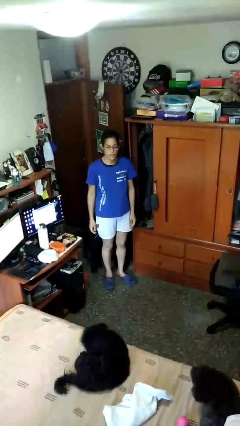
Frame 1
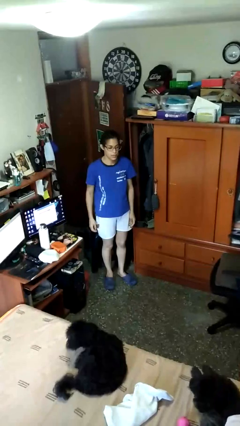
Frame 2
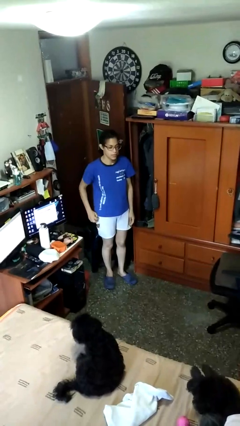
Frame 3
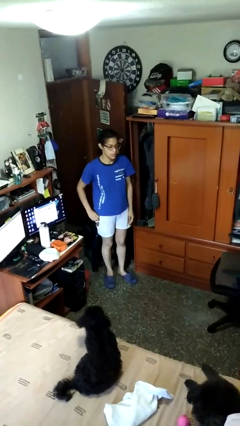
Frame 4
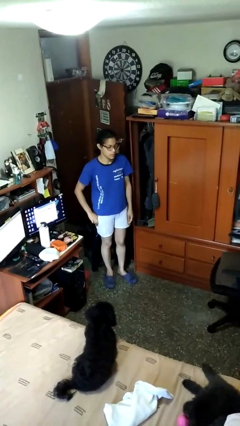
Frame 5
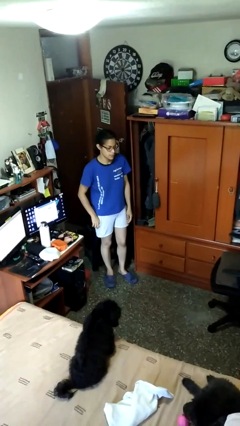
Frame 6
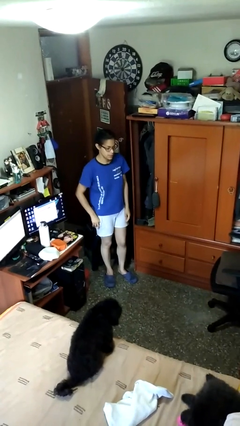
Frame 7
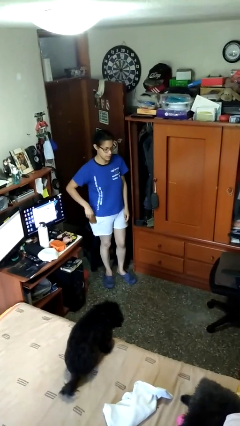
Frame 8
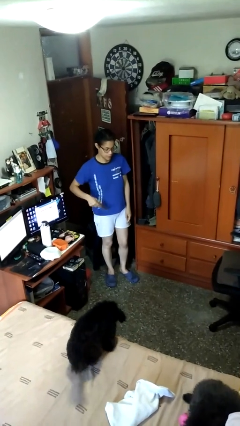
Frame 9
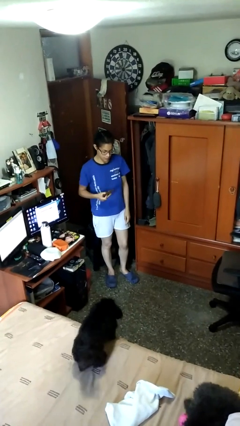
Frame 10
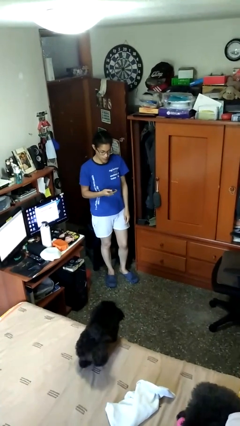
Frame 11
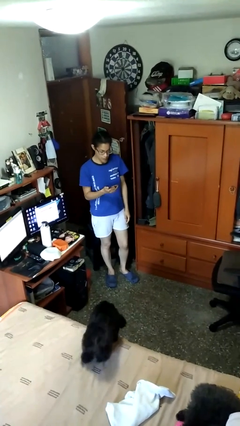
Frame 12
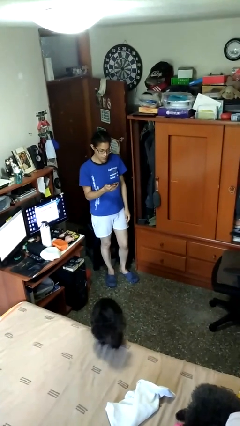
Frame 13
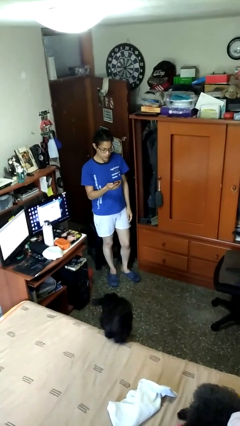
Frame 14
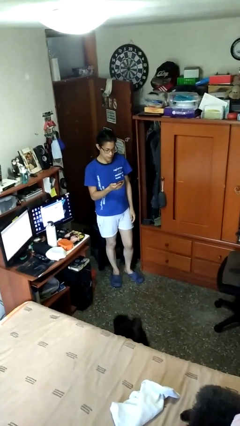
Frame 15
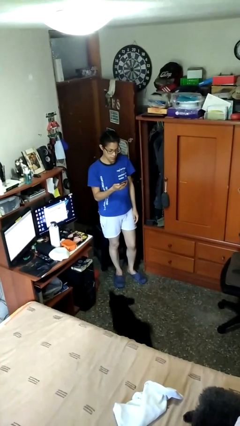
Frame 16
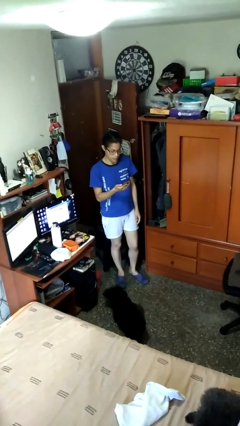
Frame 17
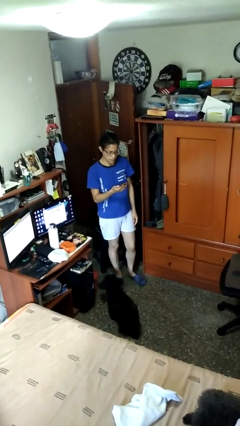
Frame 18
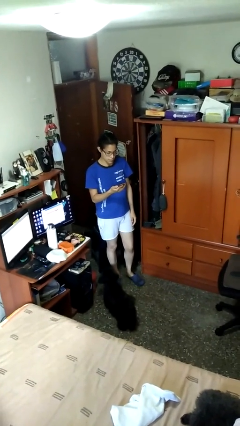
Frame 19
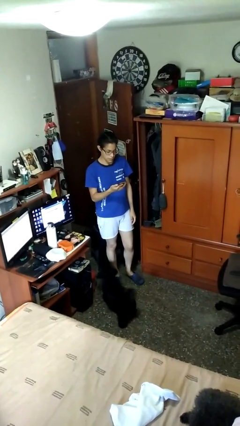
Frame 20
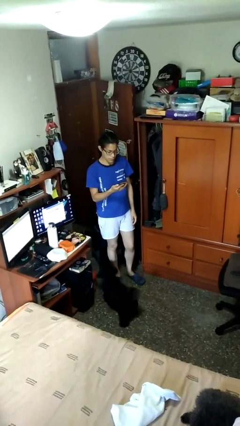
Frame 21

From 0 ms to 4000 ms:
person takes phone from pocket

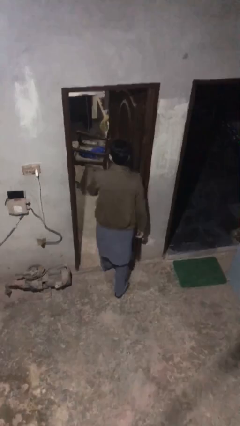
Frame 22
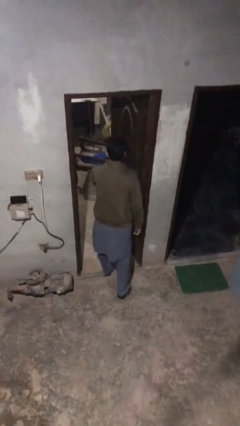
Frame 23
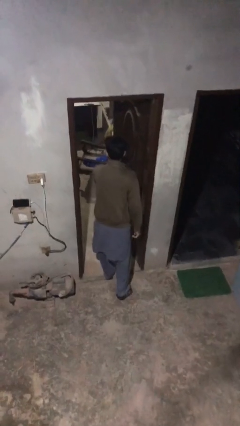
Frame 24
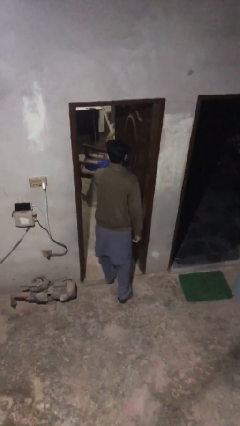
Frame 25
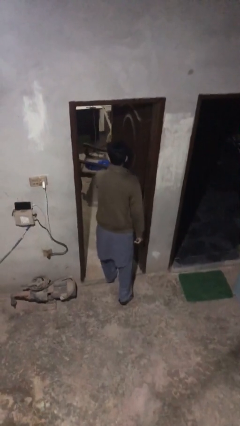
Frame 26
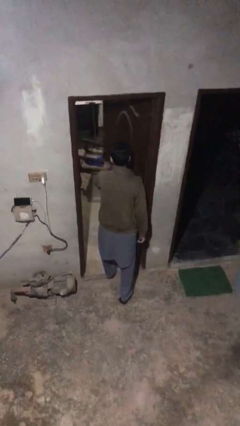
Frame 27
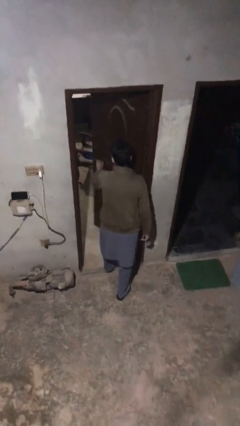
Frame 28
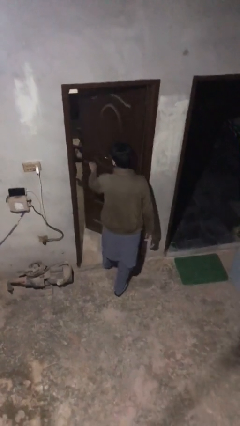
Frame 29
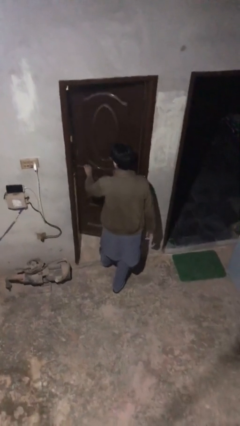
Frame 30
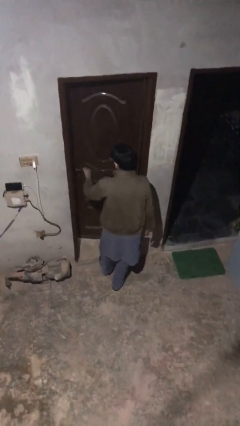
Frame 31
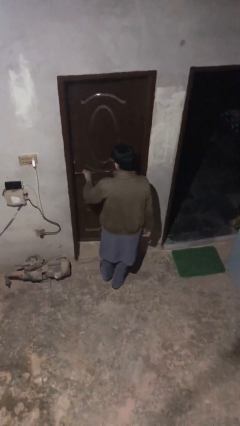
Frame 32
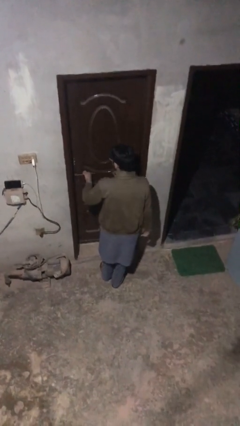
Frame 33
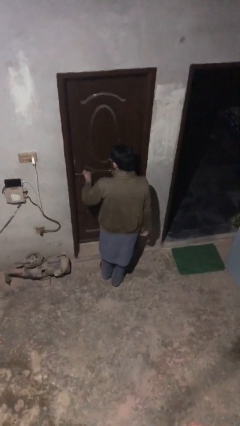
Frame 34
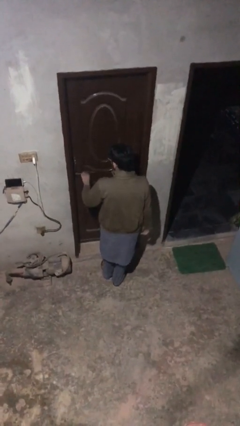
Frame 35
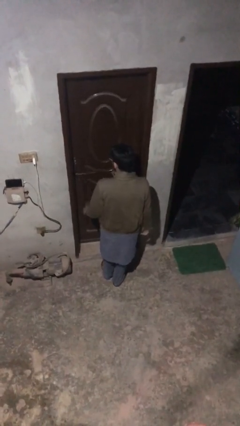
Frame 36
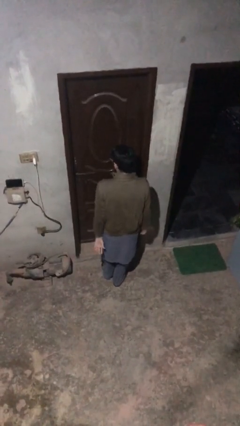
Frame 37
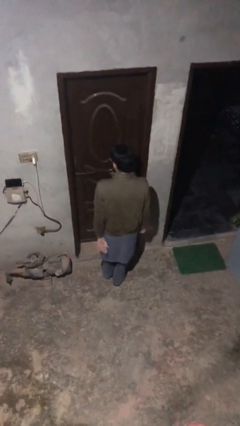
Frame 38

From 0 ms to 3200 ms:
person closes facility door

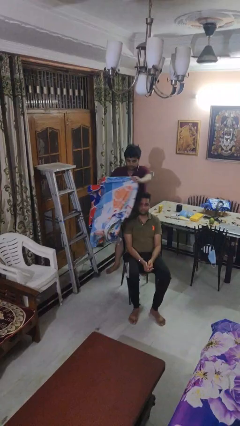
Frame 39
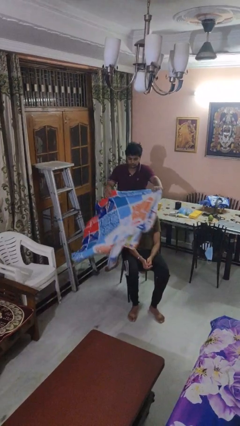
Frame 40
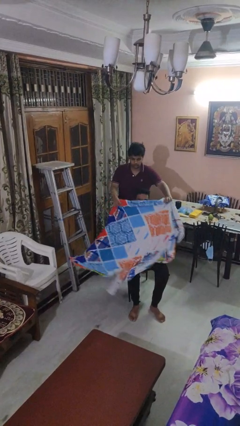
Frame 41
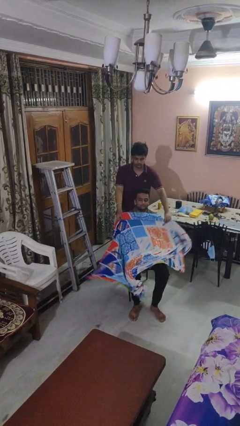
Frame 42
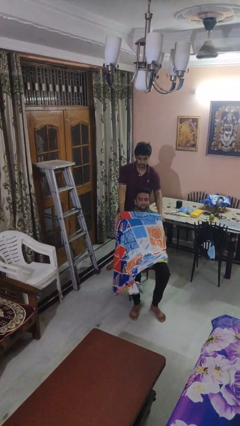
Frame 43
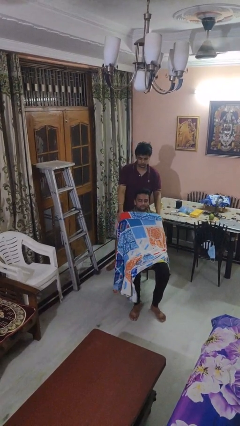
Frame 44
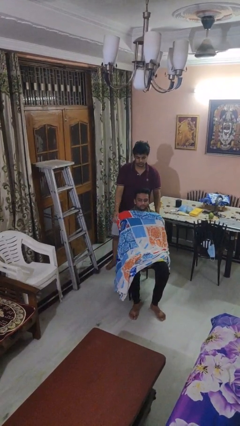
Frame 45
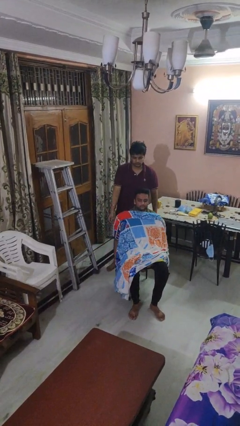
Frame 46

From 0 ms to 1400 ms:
person covers friend with blanket

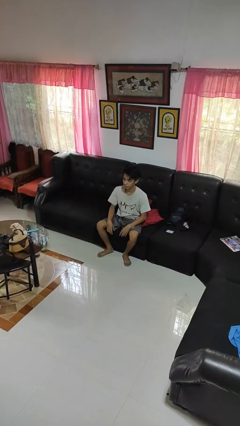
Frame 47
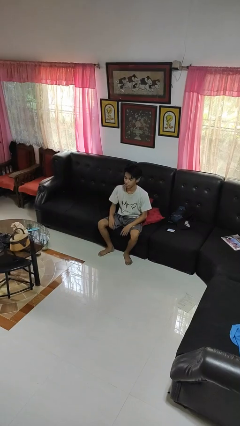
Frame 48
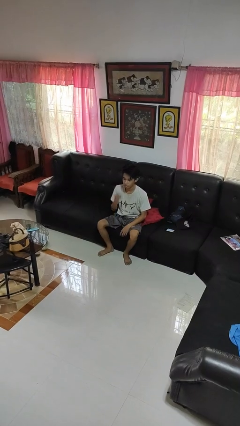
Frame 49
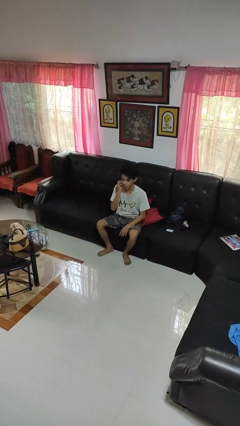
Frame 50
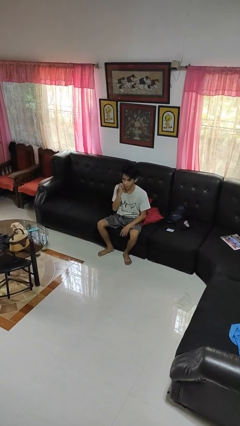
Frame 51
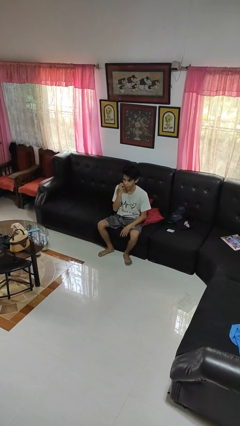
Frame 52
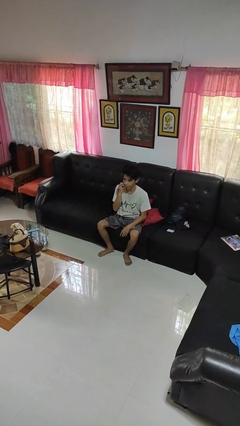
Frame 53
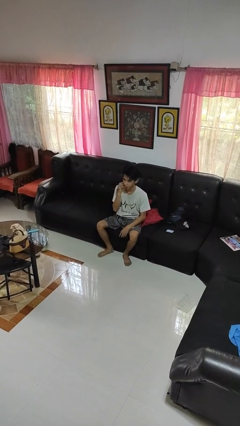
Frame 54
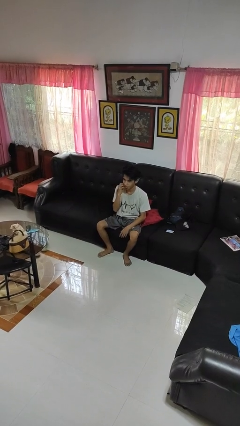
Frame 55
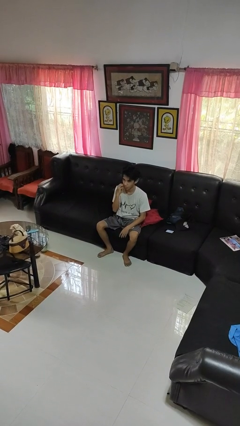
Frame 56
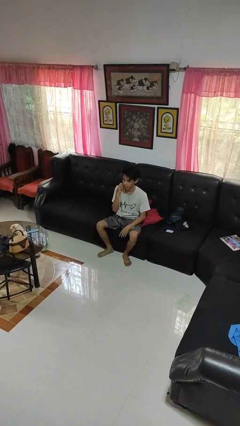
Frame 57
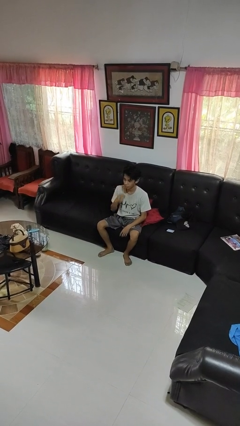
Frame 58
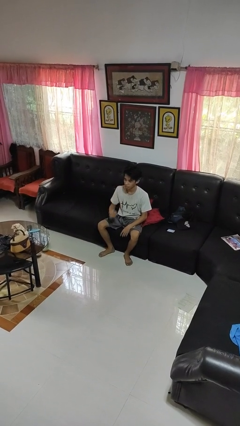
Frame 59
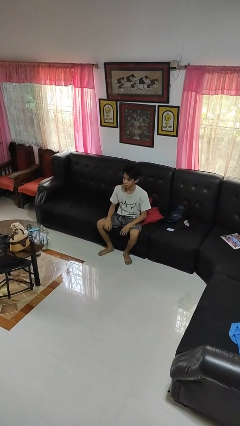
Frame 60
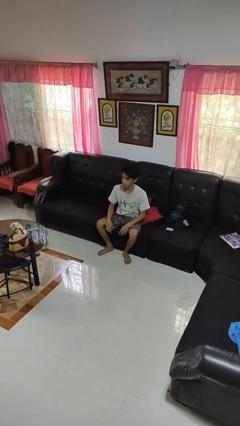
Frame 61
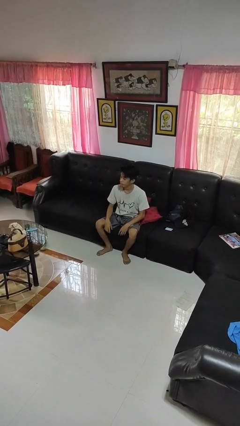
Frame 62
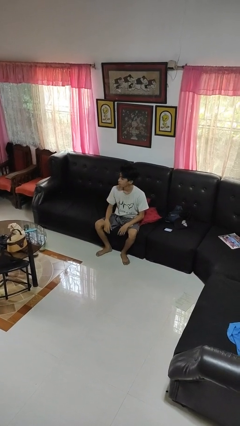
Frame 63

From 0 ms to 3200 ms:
person scratches face

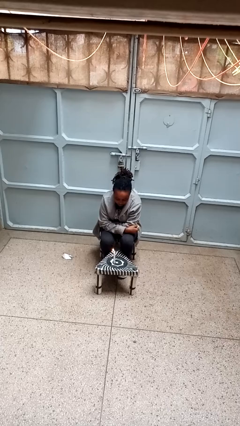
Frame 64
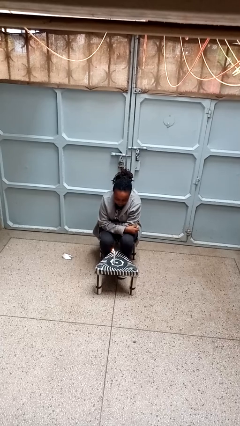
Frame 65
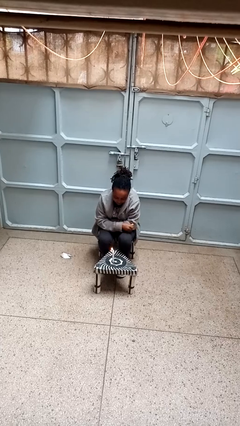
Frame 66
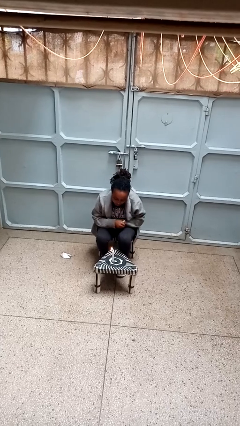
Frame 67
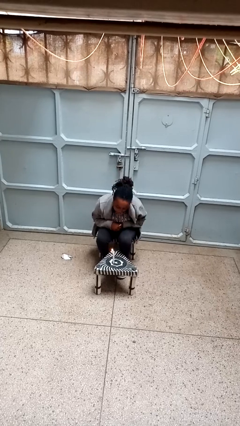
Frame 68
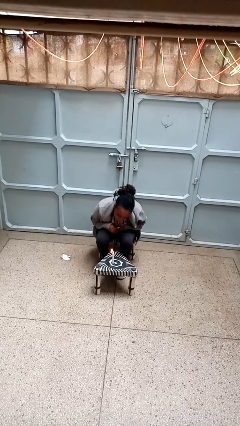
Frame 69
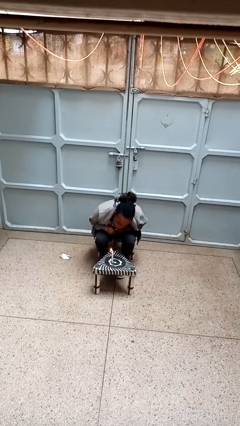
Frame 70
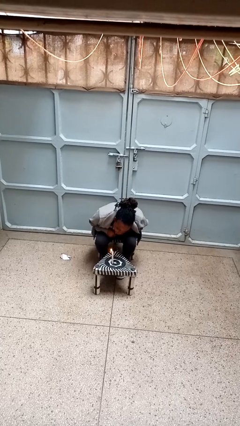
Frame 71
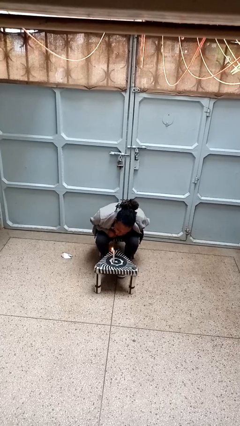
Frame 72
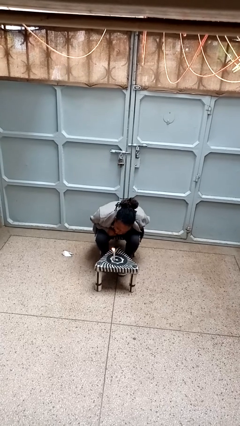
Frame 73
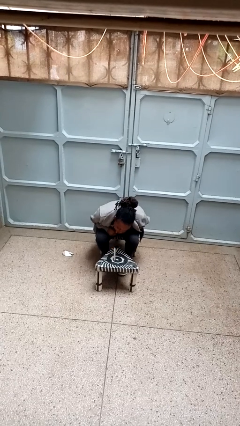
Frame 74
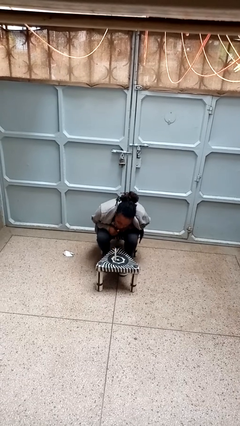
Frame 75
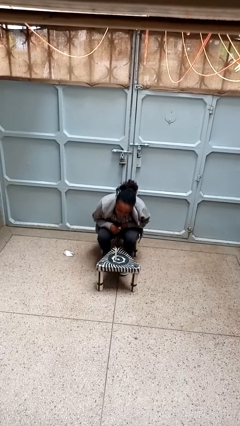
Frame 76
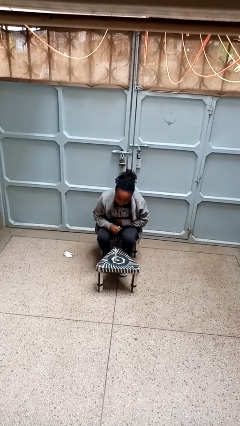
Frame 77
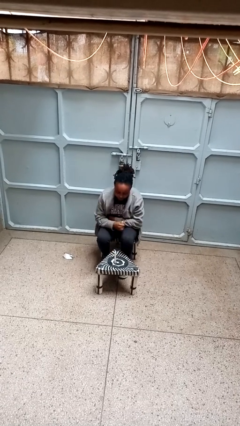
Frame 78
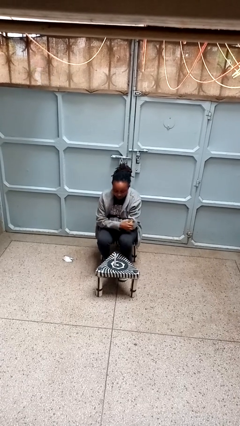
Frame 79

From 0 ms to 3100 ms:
person extinguishes candle

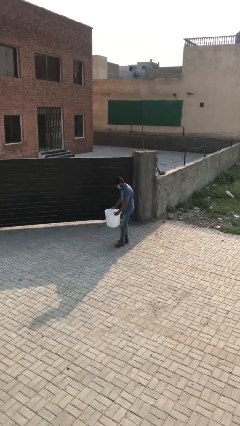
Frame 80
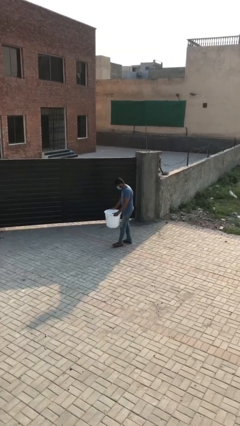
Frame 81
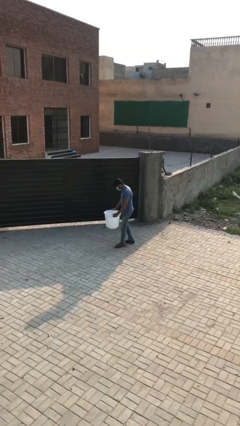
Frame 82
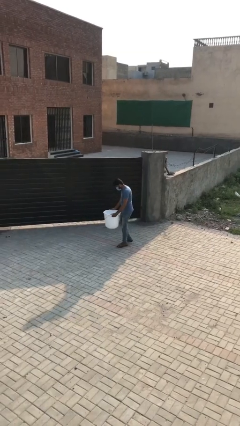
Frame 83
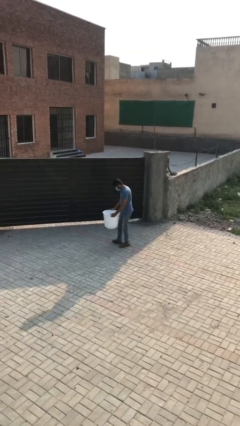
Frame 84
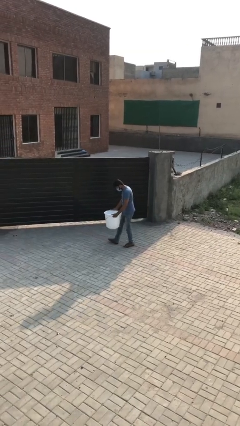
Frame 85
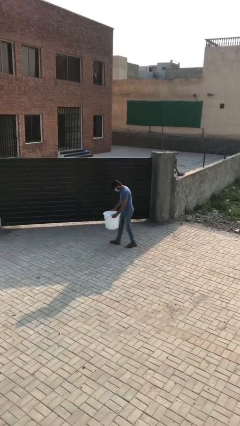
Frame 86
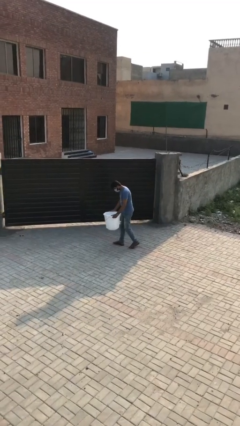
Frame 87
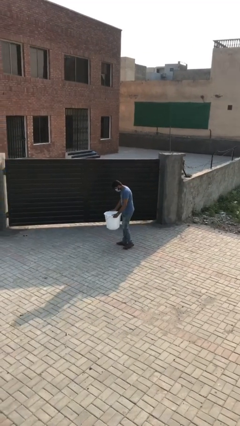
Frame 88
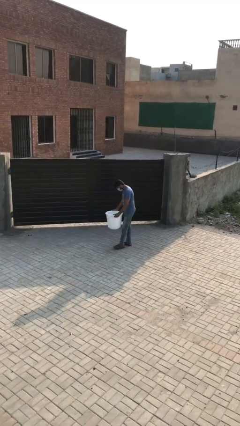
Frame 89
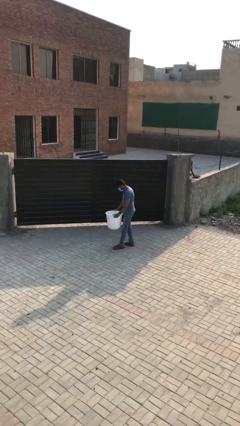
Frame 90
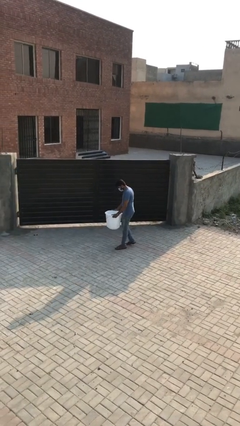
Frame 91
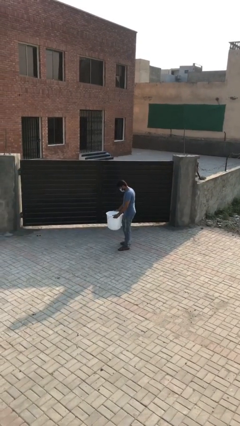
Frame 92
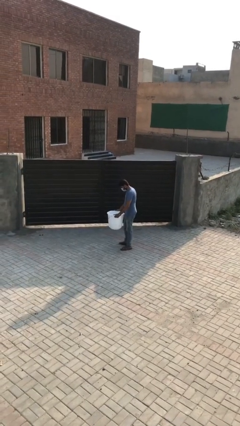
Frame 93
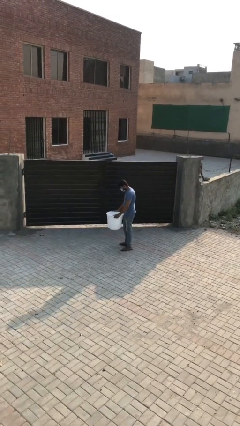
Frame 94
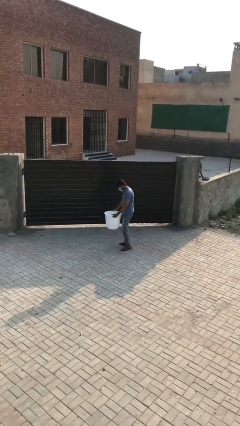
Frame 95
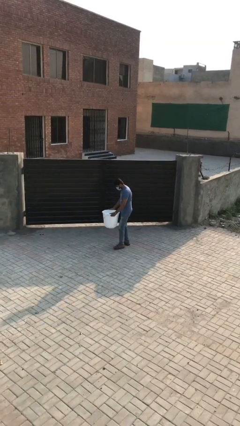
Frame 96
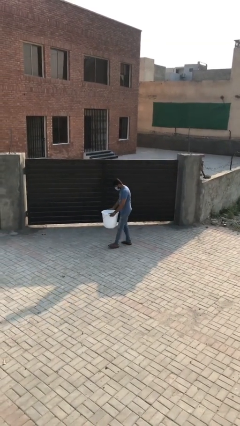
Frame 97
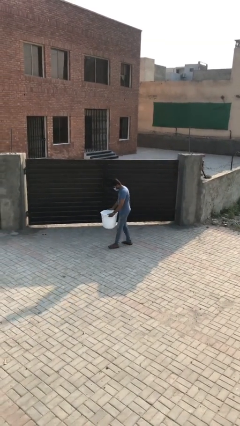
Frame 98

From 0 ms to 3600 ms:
person carries heavy object
